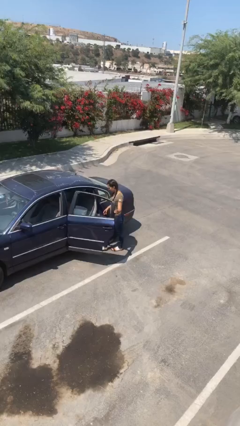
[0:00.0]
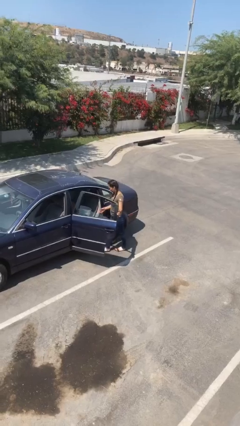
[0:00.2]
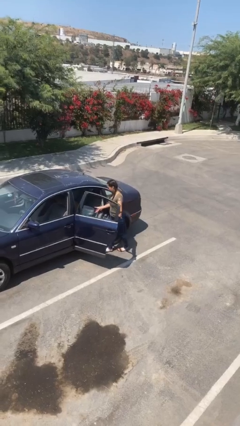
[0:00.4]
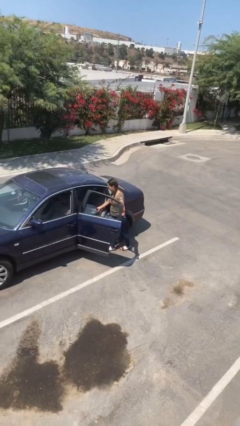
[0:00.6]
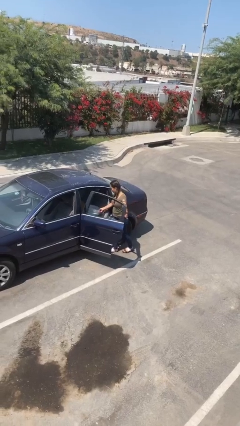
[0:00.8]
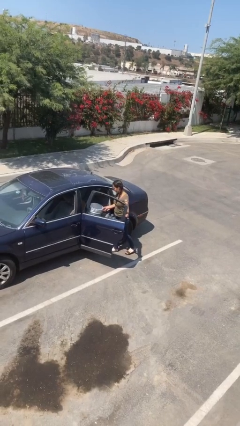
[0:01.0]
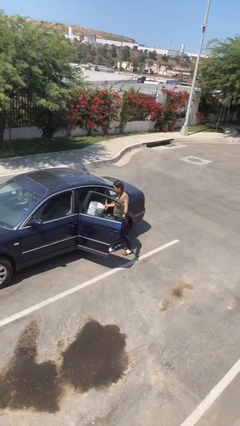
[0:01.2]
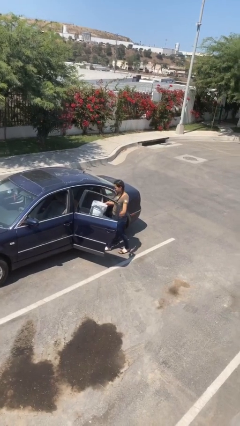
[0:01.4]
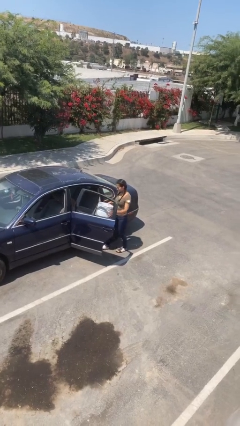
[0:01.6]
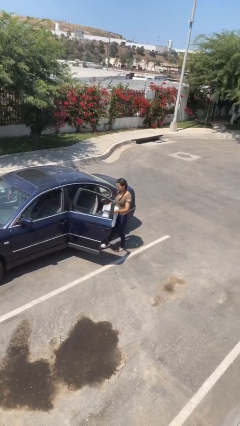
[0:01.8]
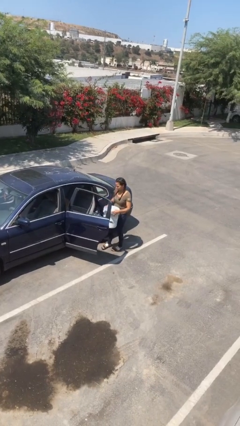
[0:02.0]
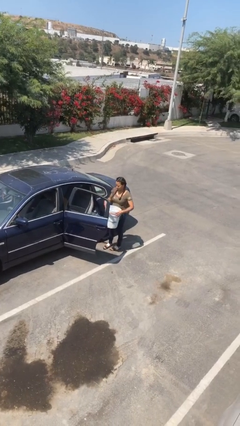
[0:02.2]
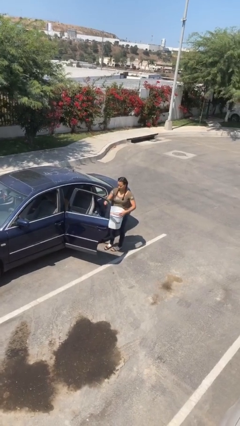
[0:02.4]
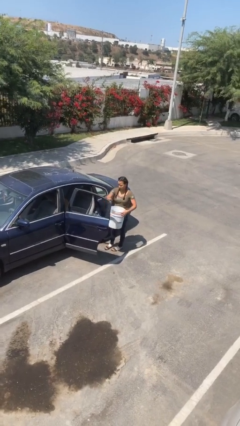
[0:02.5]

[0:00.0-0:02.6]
person unloads car

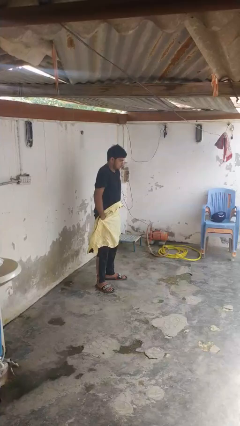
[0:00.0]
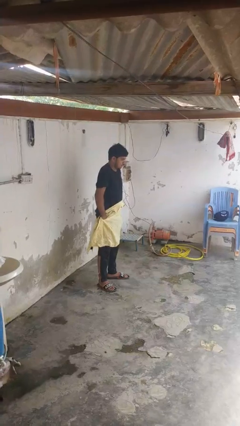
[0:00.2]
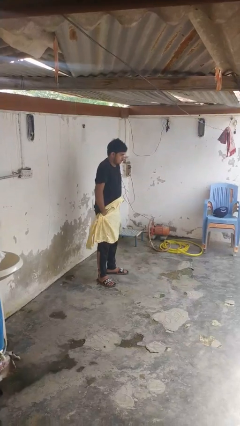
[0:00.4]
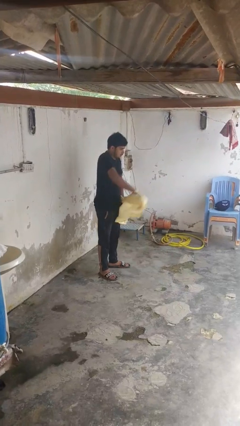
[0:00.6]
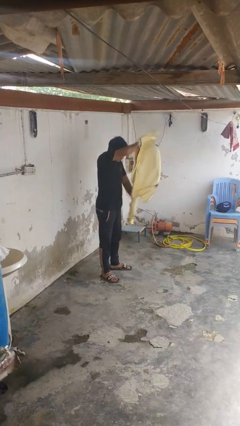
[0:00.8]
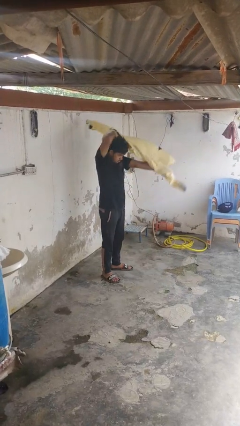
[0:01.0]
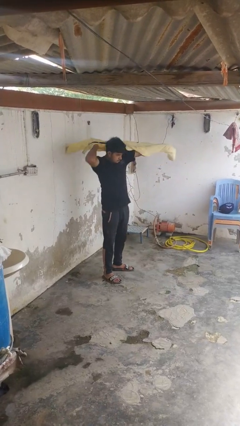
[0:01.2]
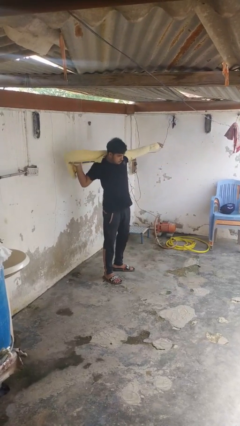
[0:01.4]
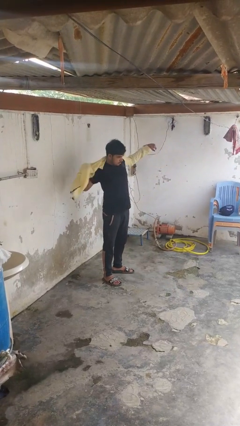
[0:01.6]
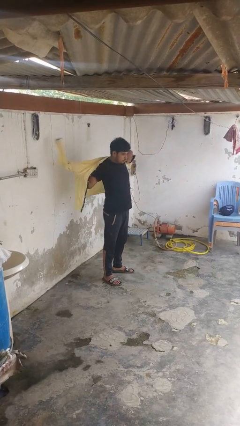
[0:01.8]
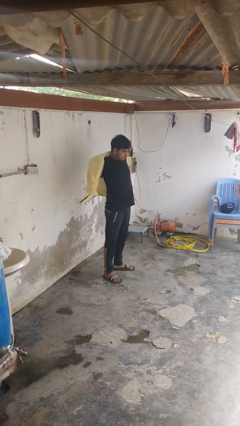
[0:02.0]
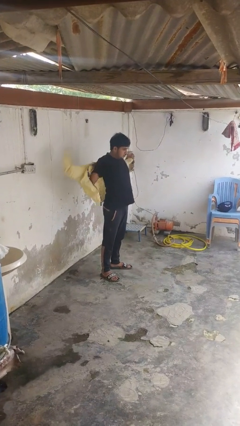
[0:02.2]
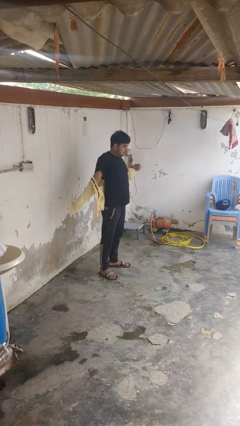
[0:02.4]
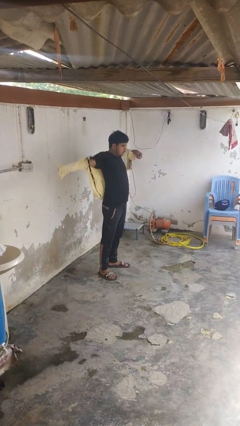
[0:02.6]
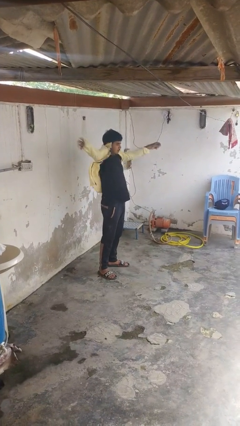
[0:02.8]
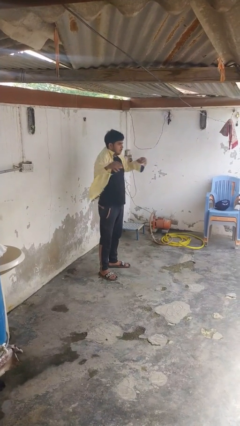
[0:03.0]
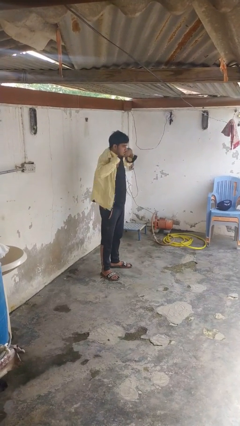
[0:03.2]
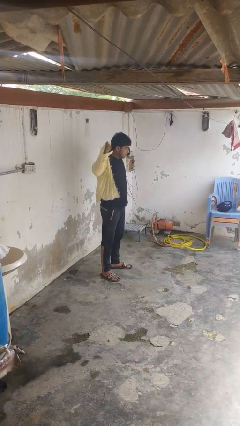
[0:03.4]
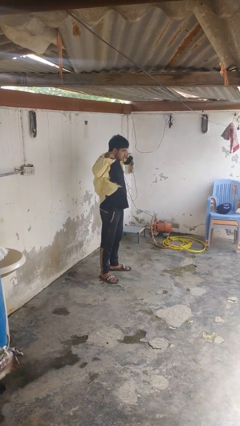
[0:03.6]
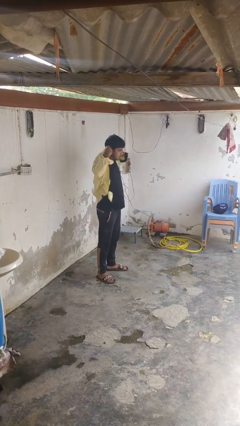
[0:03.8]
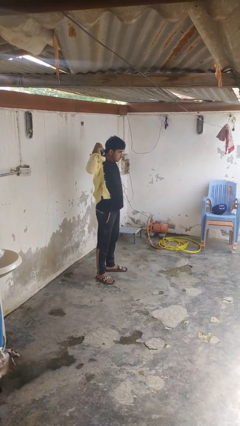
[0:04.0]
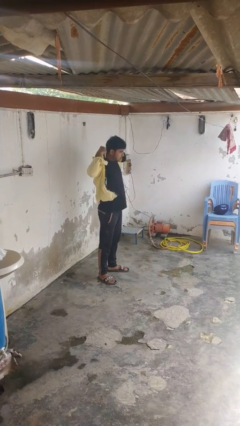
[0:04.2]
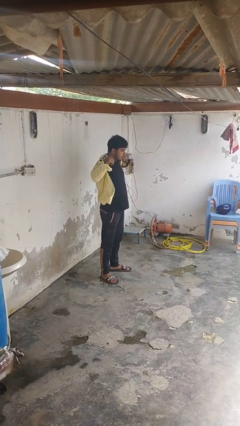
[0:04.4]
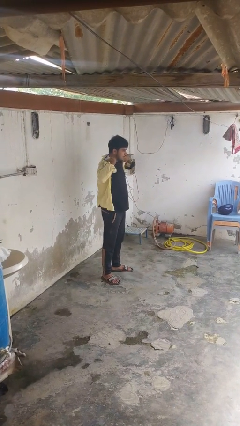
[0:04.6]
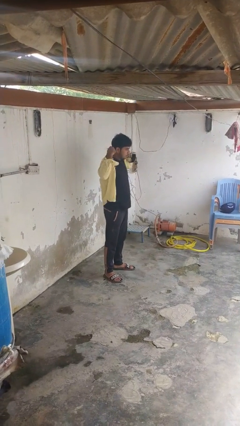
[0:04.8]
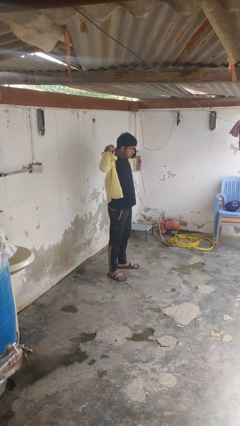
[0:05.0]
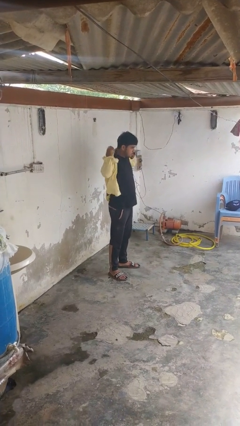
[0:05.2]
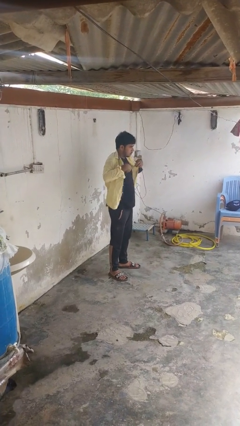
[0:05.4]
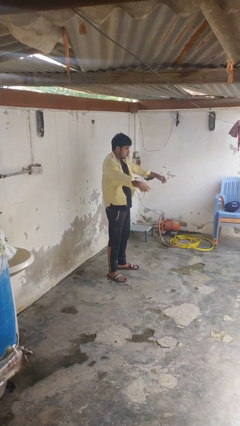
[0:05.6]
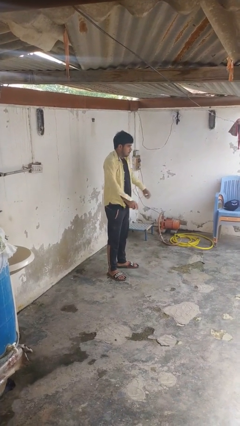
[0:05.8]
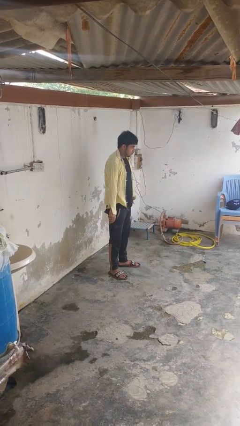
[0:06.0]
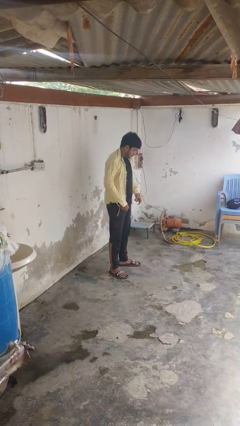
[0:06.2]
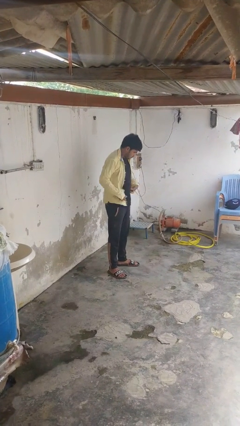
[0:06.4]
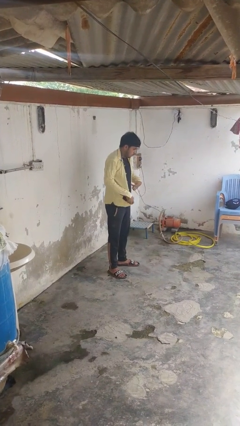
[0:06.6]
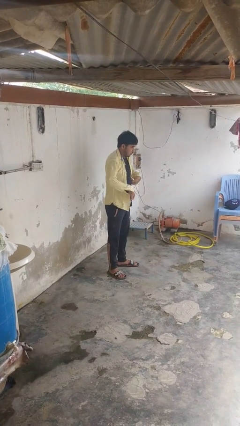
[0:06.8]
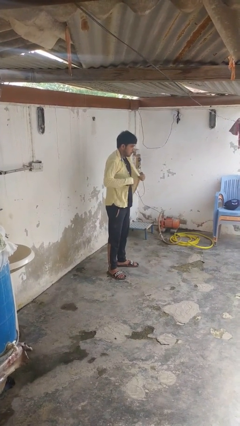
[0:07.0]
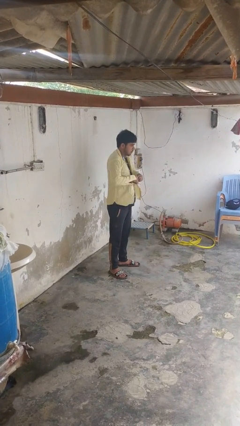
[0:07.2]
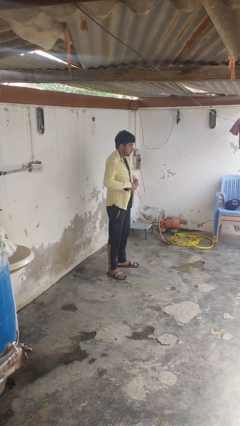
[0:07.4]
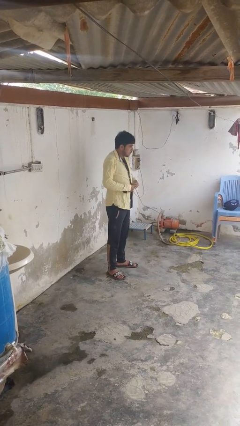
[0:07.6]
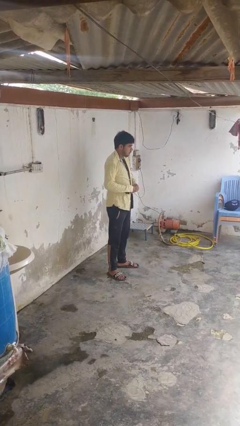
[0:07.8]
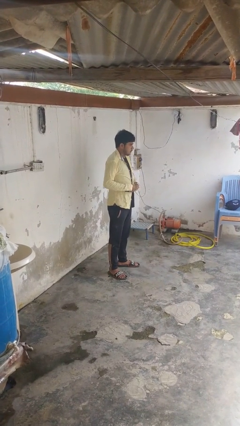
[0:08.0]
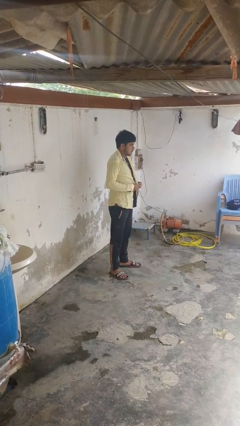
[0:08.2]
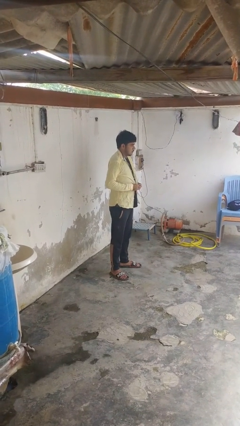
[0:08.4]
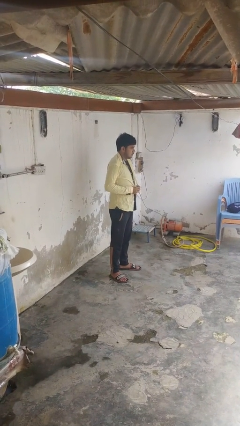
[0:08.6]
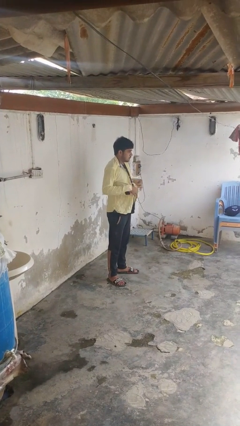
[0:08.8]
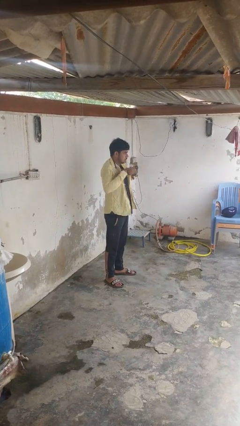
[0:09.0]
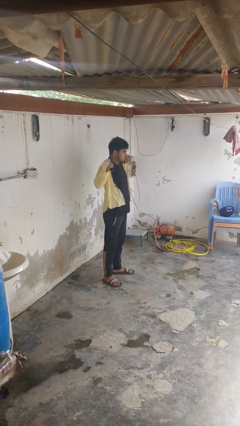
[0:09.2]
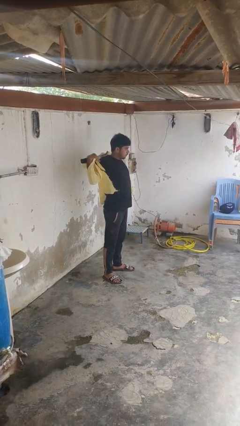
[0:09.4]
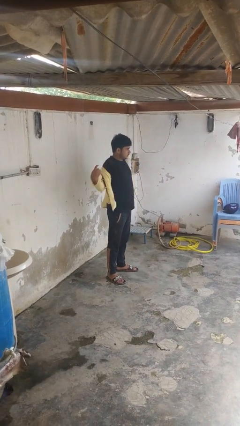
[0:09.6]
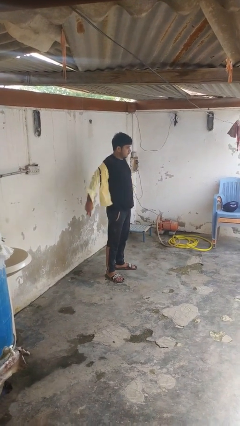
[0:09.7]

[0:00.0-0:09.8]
person puts on shirt

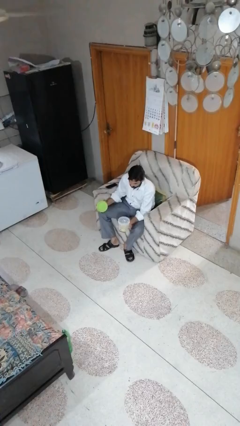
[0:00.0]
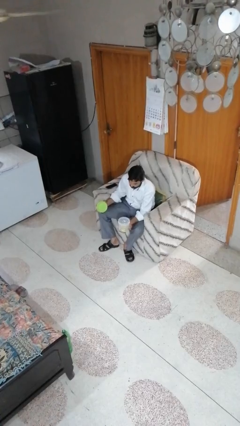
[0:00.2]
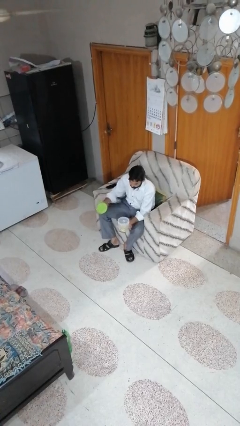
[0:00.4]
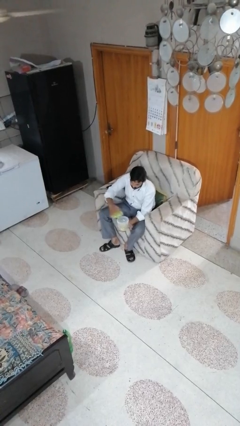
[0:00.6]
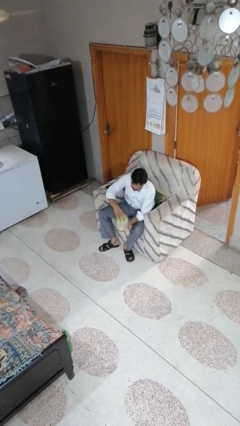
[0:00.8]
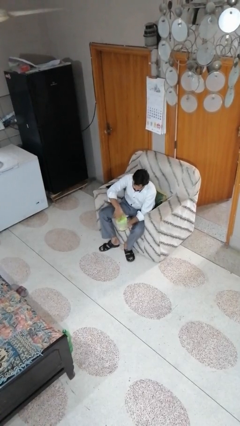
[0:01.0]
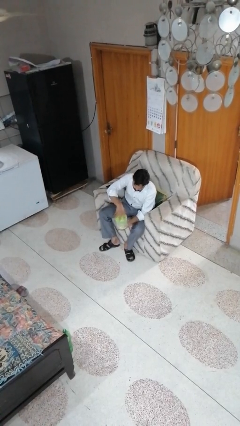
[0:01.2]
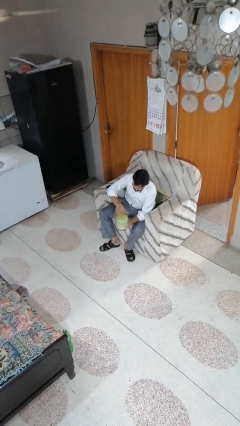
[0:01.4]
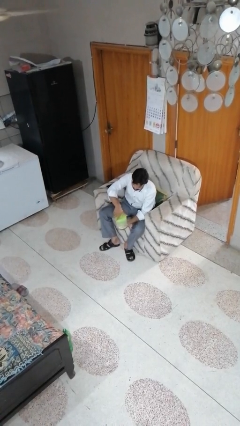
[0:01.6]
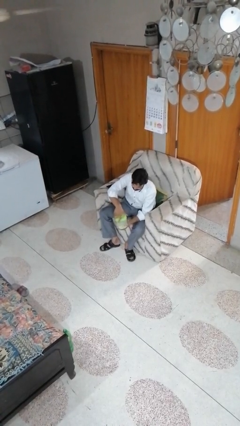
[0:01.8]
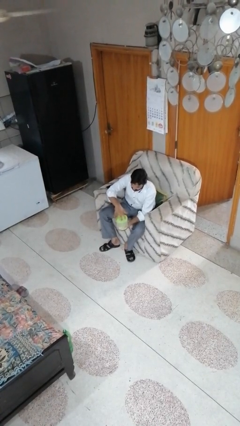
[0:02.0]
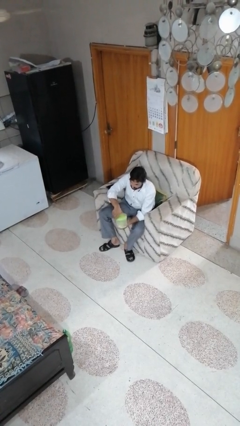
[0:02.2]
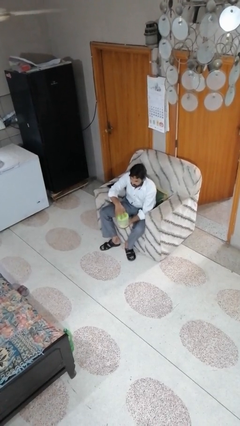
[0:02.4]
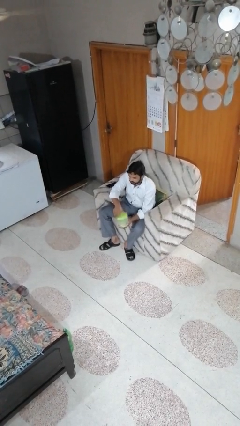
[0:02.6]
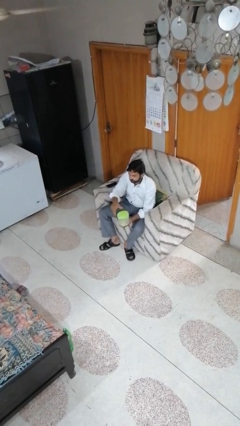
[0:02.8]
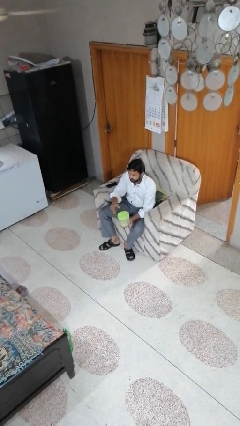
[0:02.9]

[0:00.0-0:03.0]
person closes jar

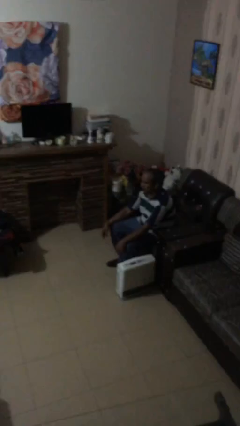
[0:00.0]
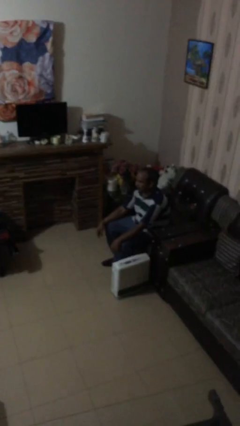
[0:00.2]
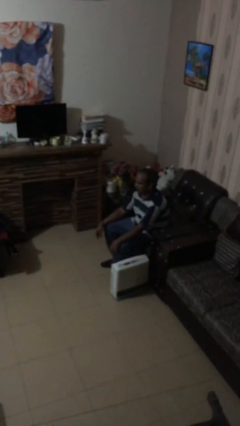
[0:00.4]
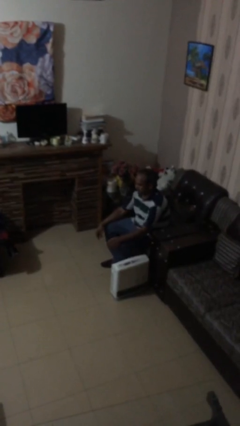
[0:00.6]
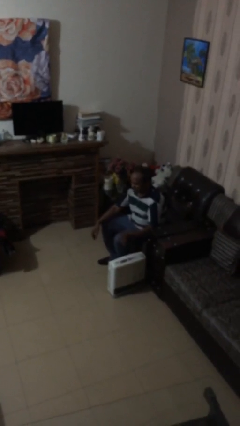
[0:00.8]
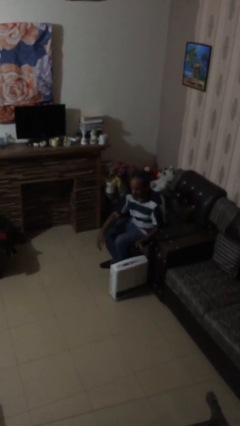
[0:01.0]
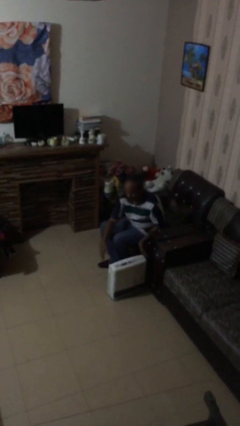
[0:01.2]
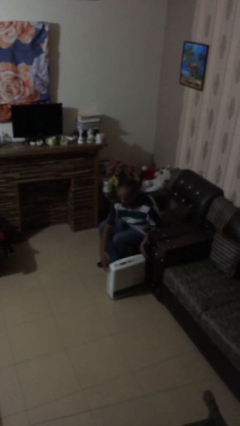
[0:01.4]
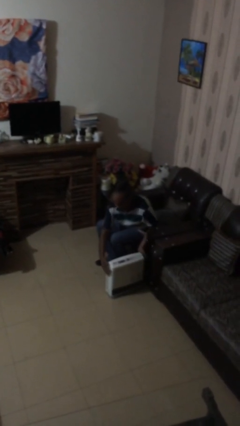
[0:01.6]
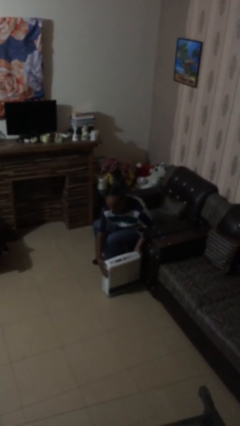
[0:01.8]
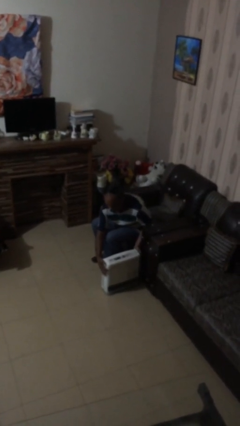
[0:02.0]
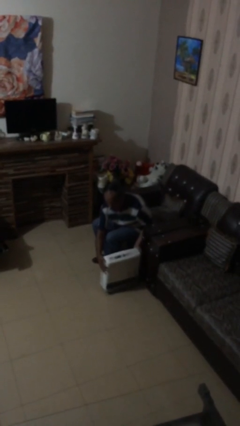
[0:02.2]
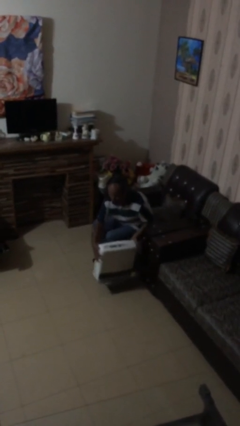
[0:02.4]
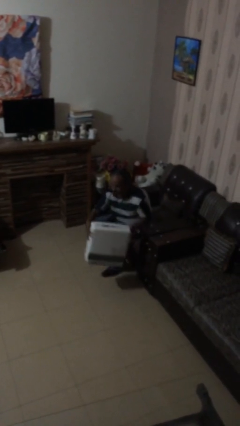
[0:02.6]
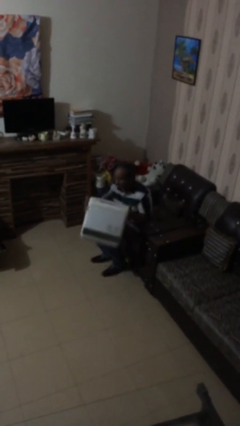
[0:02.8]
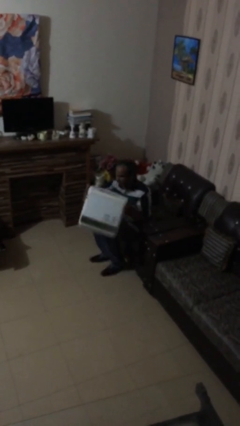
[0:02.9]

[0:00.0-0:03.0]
person picks up object from floor
